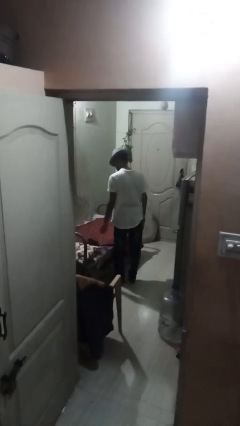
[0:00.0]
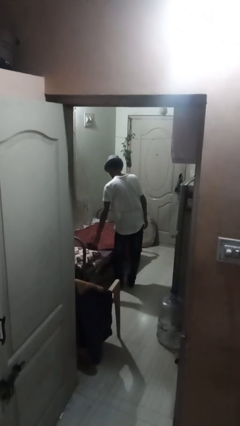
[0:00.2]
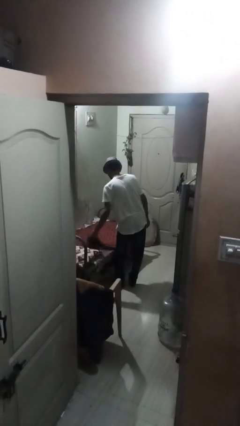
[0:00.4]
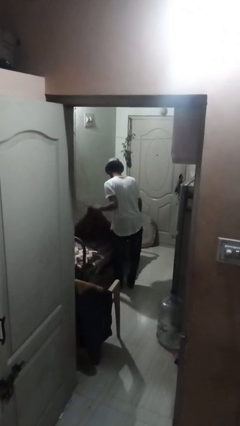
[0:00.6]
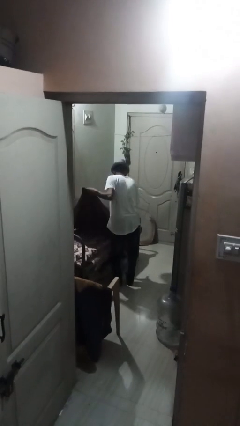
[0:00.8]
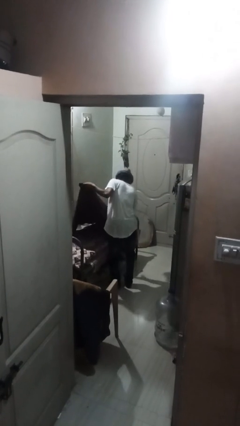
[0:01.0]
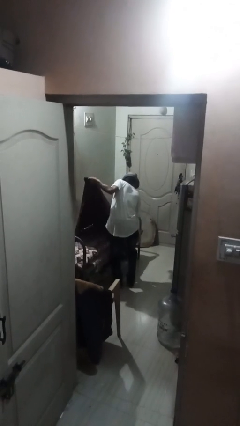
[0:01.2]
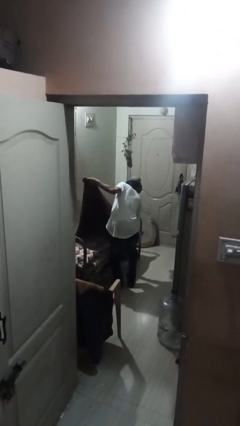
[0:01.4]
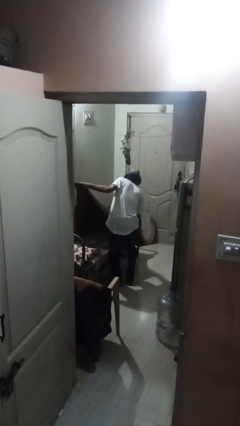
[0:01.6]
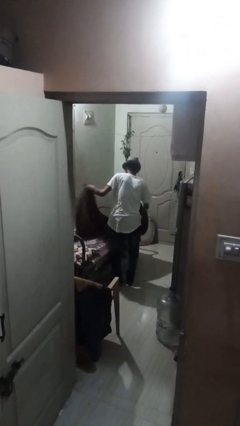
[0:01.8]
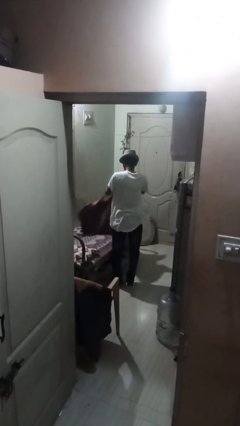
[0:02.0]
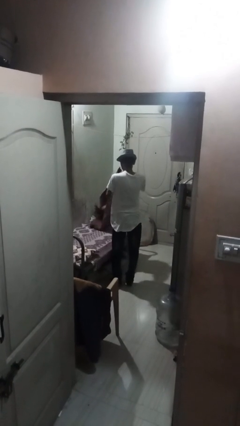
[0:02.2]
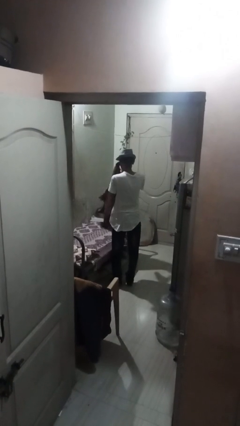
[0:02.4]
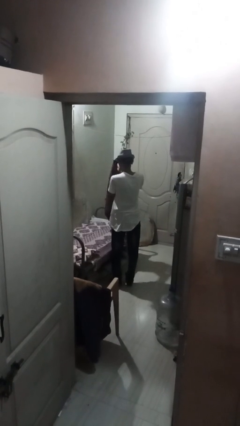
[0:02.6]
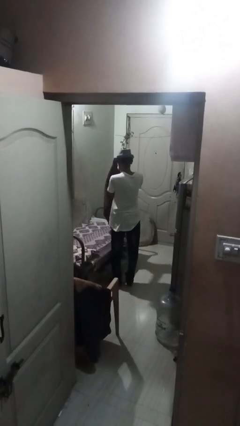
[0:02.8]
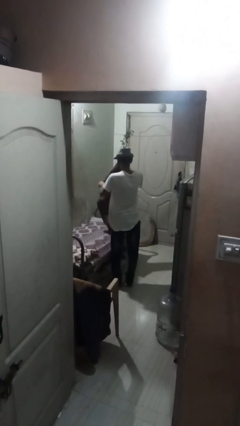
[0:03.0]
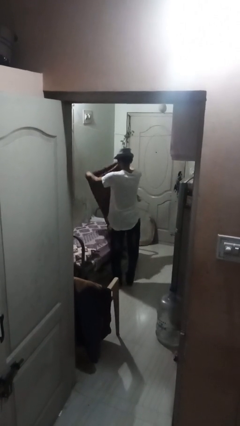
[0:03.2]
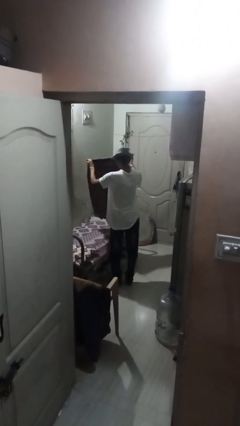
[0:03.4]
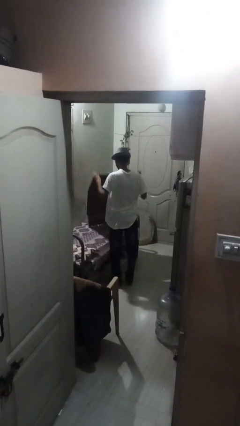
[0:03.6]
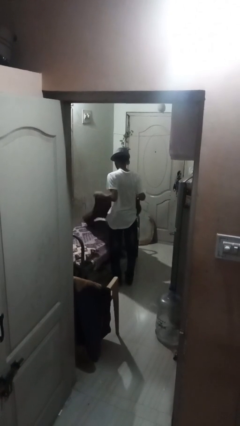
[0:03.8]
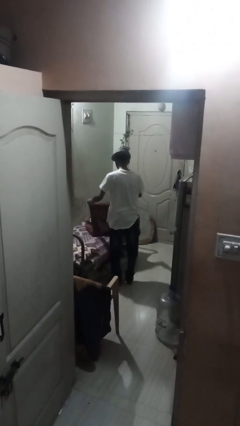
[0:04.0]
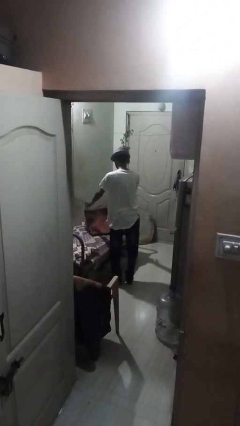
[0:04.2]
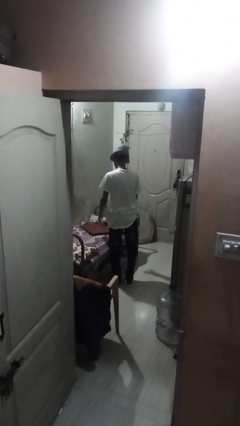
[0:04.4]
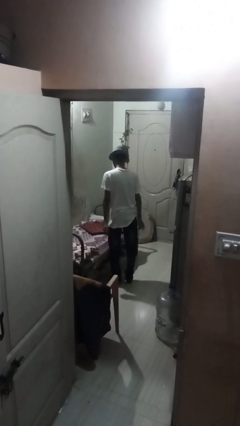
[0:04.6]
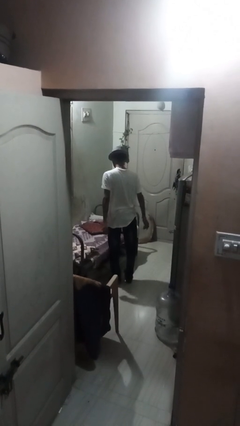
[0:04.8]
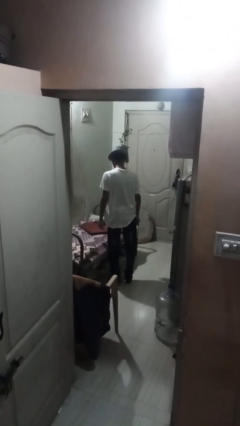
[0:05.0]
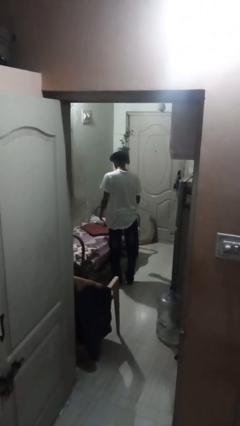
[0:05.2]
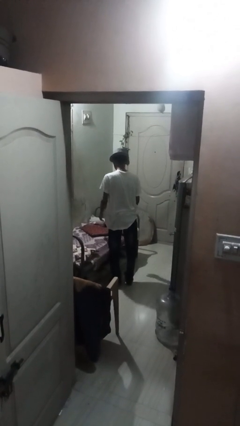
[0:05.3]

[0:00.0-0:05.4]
person folds blanket

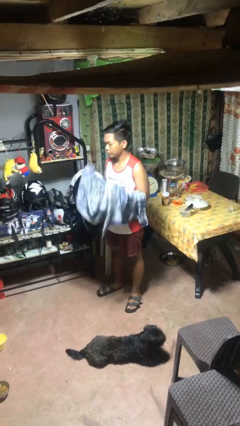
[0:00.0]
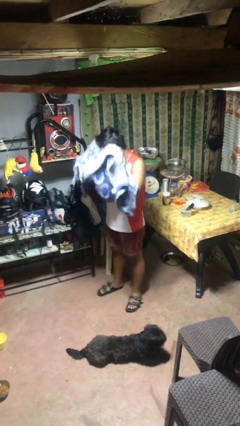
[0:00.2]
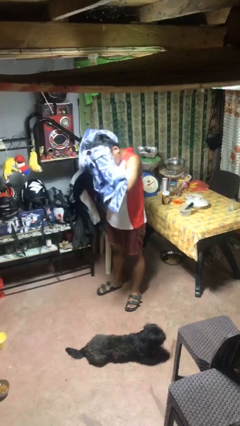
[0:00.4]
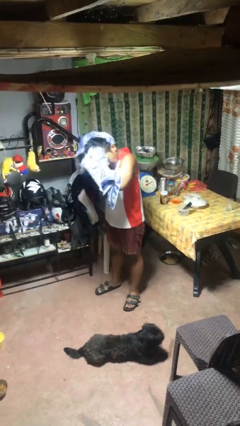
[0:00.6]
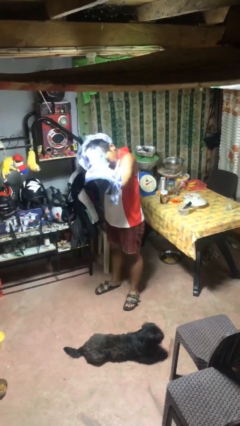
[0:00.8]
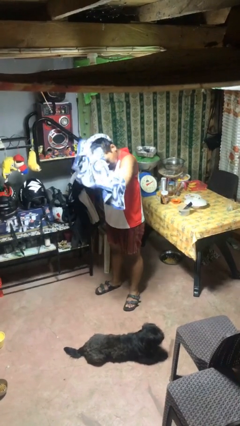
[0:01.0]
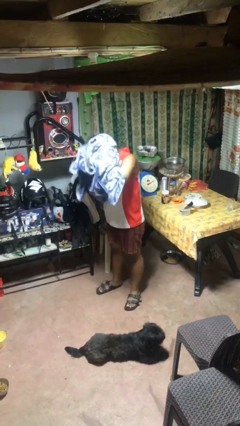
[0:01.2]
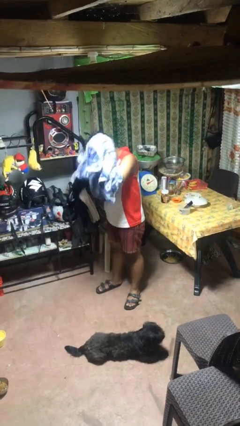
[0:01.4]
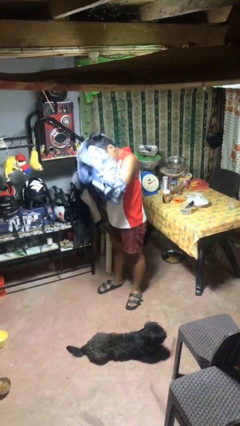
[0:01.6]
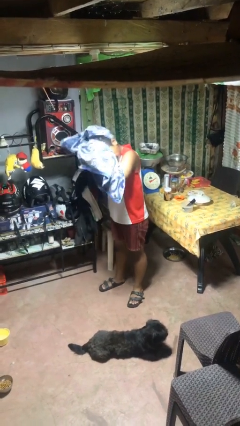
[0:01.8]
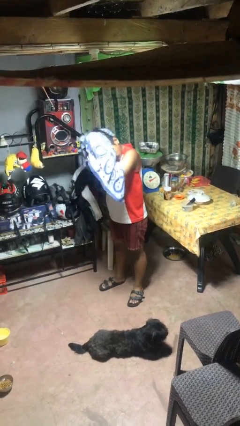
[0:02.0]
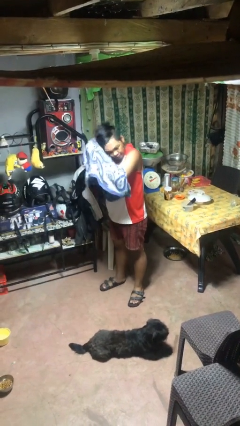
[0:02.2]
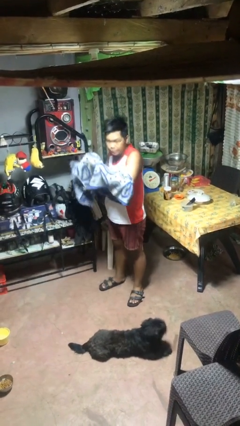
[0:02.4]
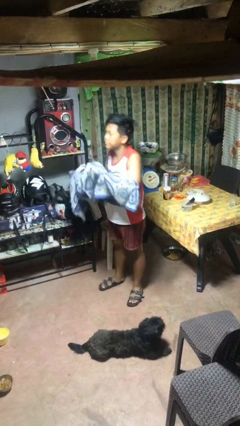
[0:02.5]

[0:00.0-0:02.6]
person dries hair with towel

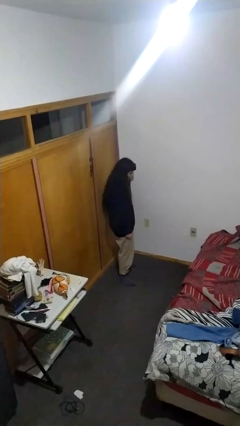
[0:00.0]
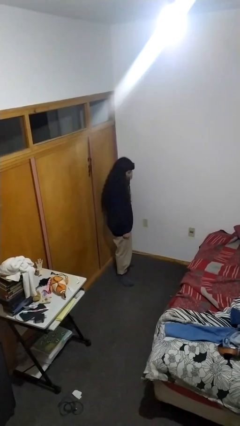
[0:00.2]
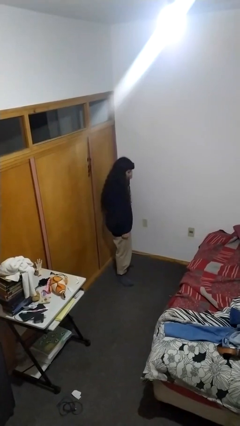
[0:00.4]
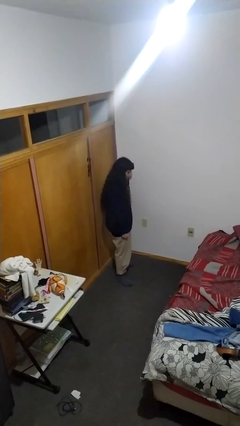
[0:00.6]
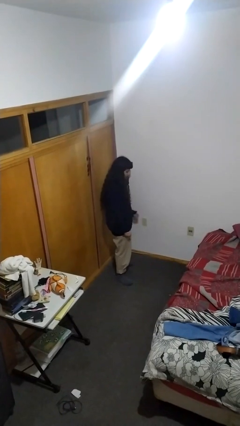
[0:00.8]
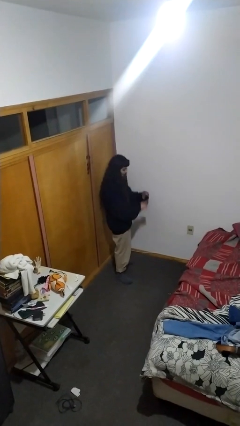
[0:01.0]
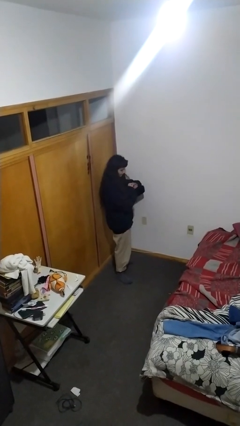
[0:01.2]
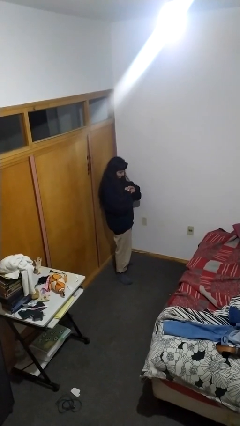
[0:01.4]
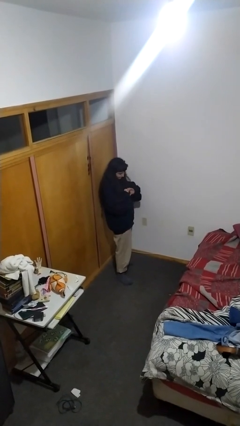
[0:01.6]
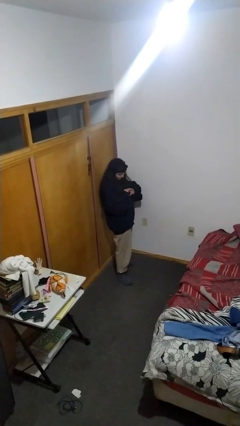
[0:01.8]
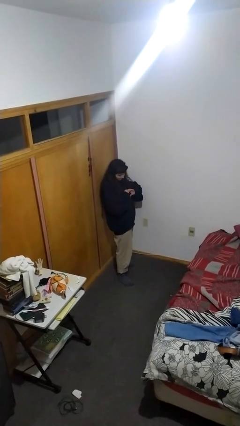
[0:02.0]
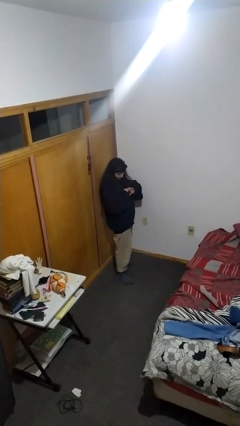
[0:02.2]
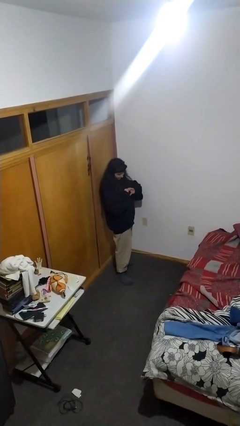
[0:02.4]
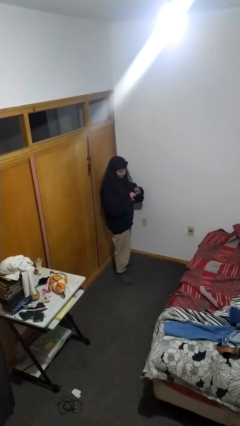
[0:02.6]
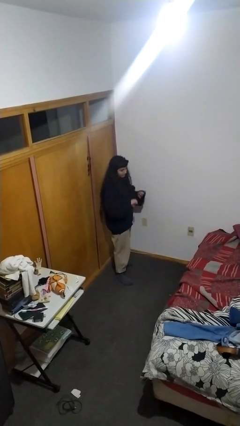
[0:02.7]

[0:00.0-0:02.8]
person gestures heart

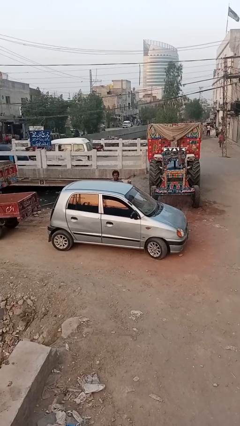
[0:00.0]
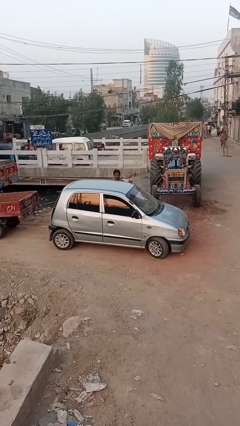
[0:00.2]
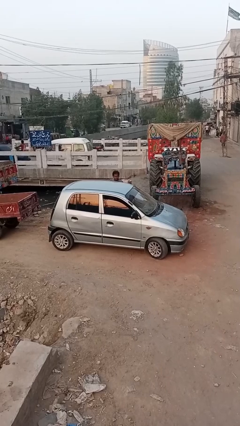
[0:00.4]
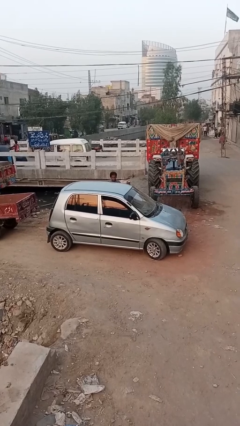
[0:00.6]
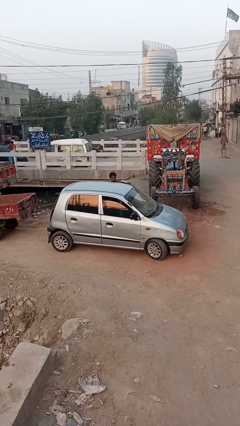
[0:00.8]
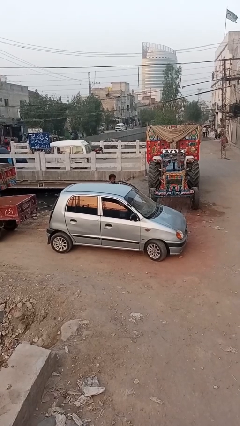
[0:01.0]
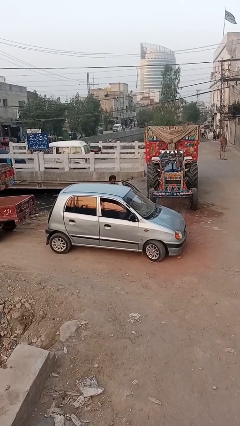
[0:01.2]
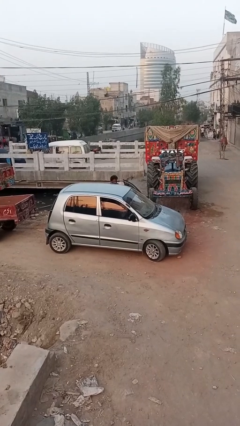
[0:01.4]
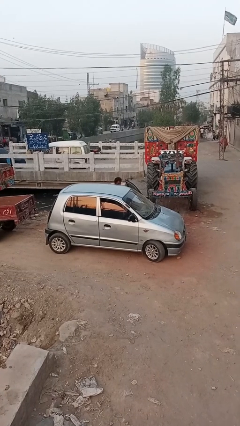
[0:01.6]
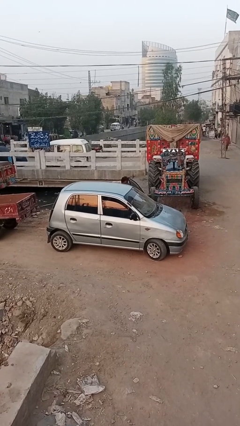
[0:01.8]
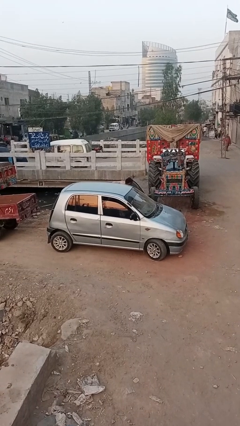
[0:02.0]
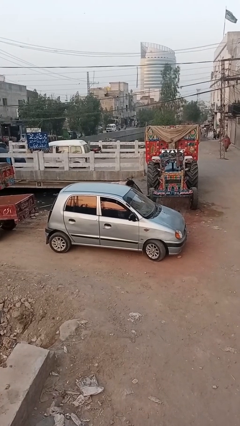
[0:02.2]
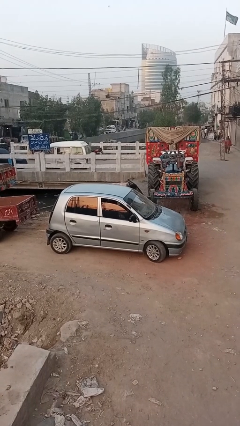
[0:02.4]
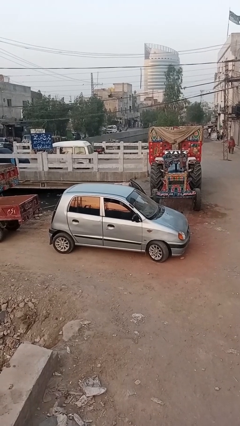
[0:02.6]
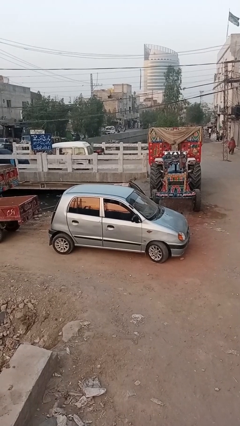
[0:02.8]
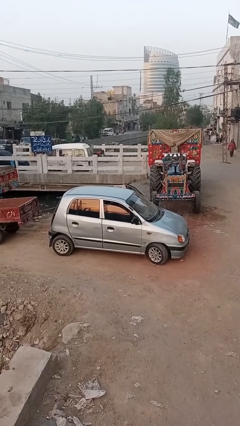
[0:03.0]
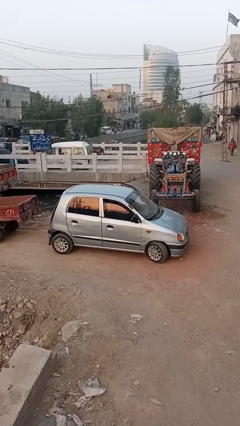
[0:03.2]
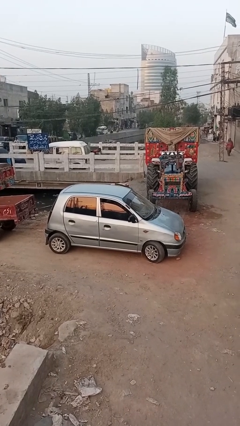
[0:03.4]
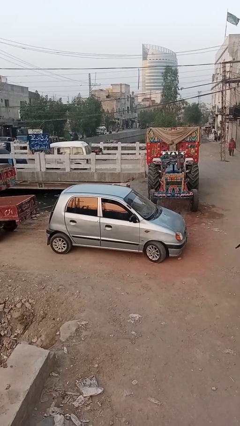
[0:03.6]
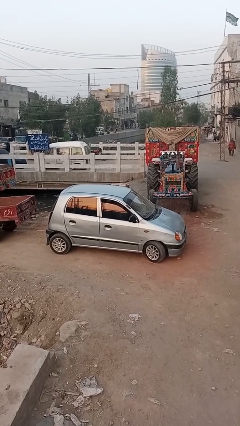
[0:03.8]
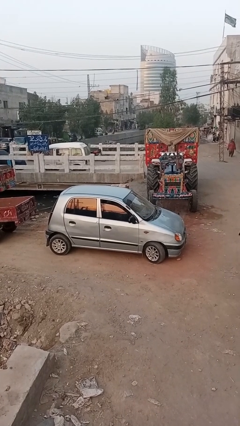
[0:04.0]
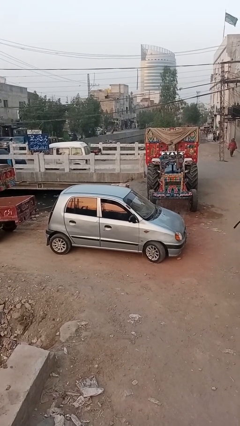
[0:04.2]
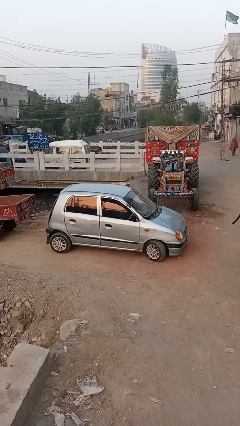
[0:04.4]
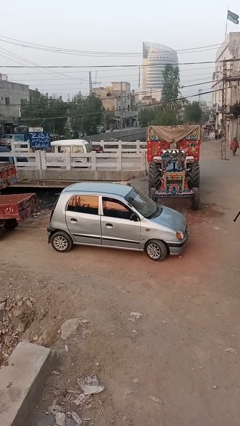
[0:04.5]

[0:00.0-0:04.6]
car picks up person

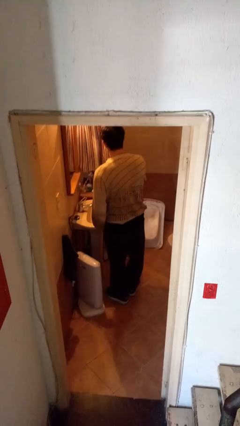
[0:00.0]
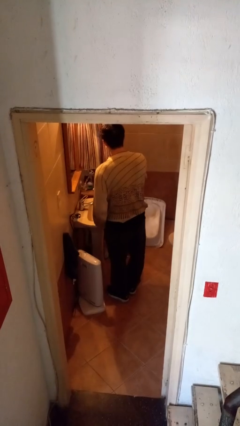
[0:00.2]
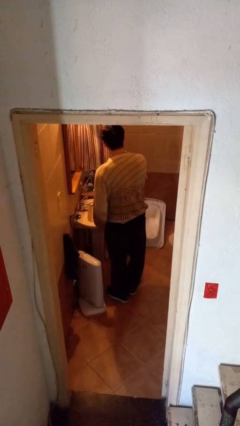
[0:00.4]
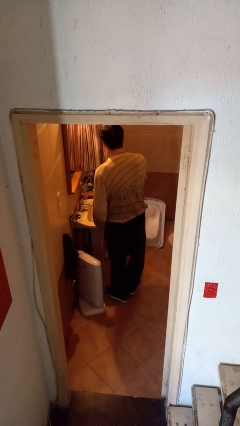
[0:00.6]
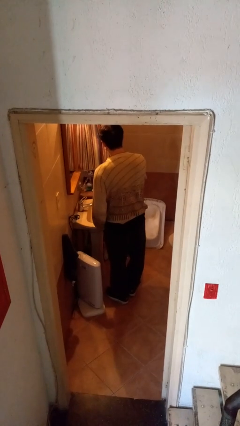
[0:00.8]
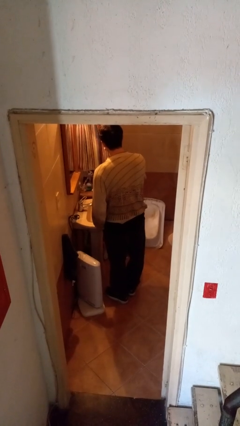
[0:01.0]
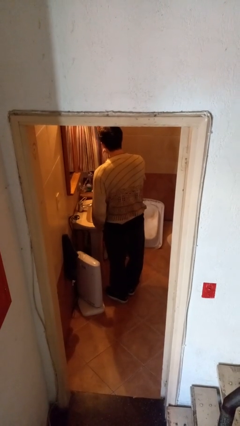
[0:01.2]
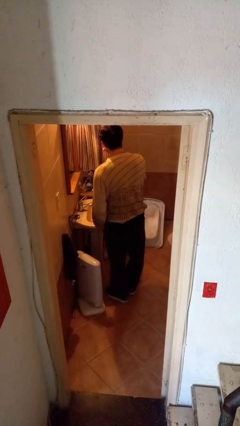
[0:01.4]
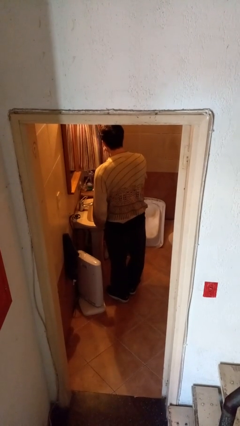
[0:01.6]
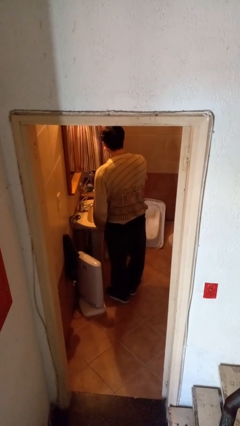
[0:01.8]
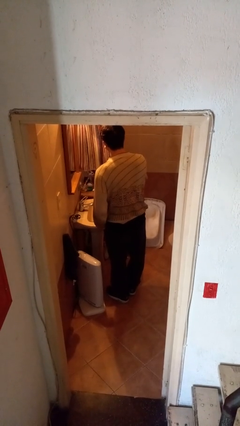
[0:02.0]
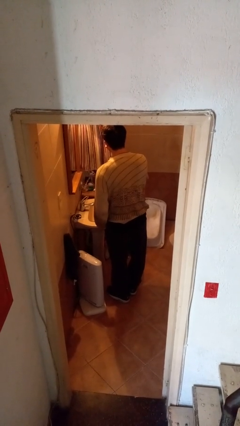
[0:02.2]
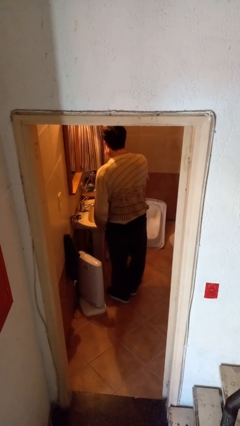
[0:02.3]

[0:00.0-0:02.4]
person brushes teeth
